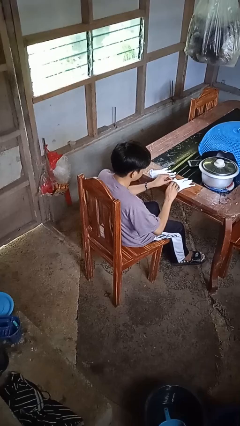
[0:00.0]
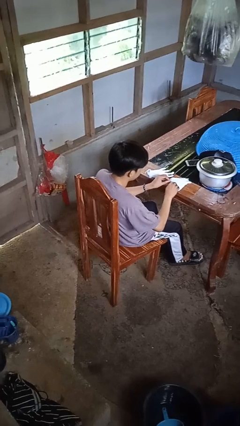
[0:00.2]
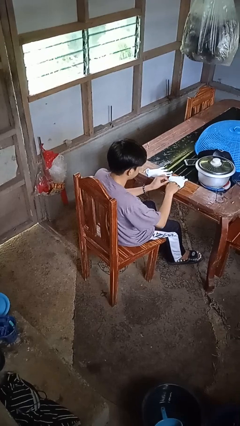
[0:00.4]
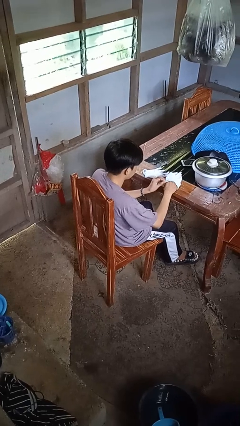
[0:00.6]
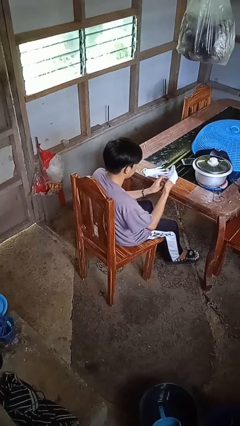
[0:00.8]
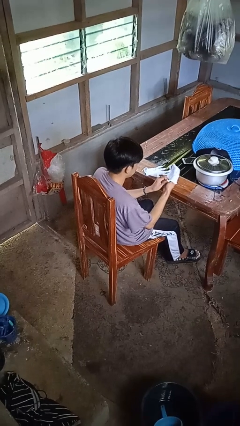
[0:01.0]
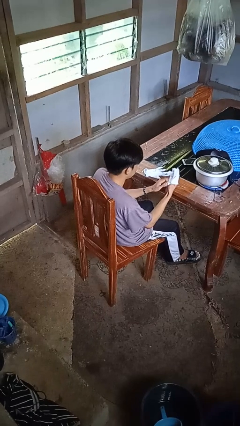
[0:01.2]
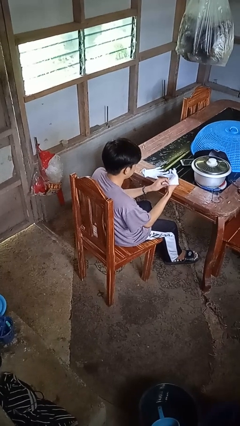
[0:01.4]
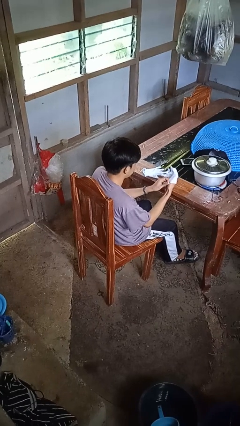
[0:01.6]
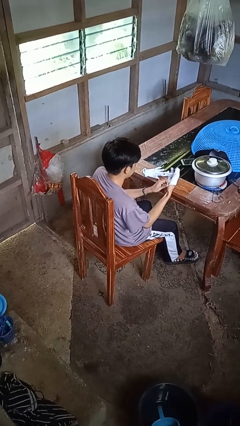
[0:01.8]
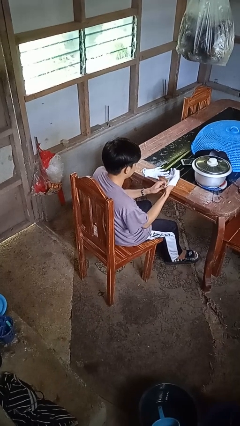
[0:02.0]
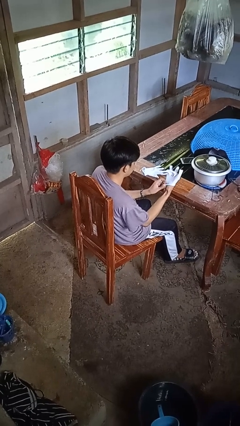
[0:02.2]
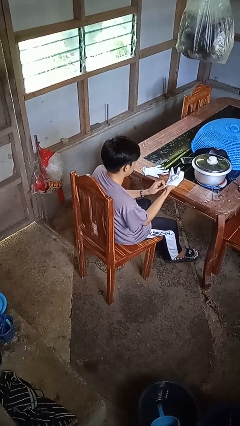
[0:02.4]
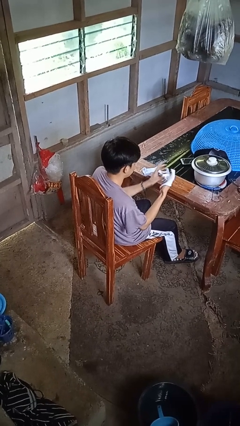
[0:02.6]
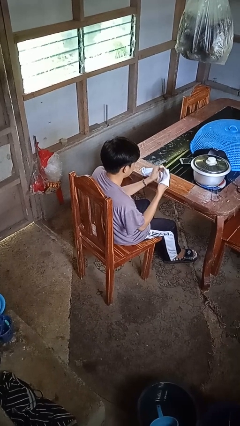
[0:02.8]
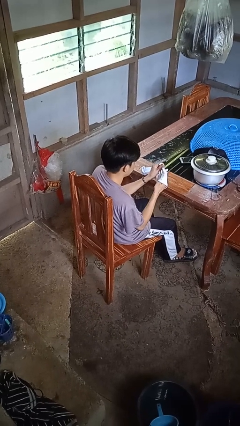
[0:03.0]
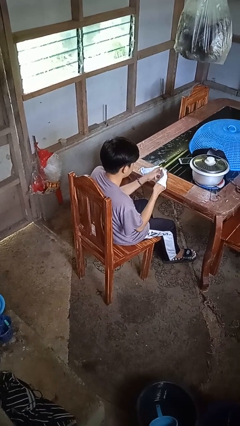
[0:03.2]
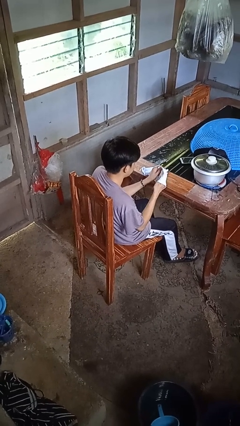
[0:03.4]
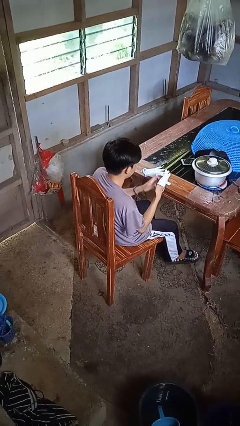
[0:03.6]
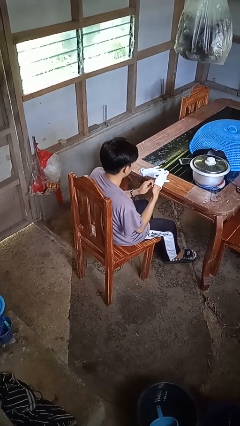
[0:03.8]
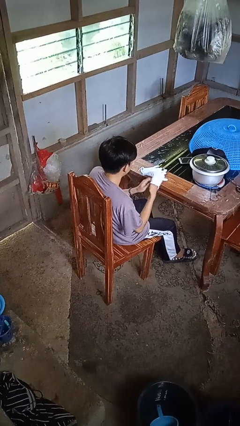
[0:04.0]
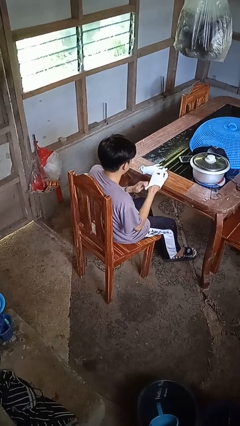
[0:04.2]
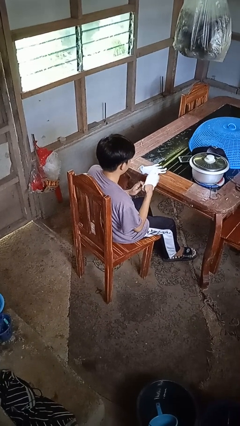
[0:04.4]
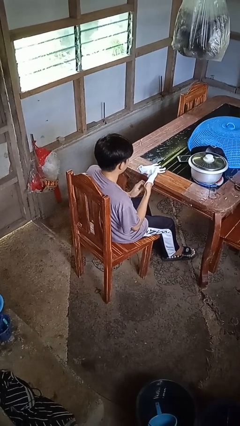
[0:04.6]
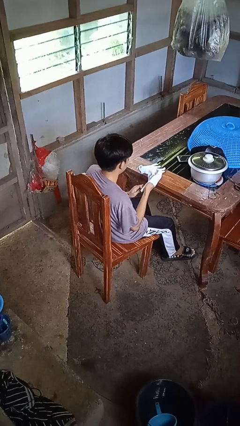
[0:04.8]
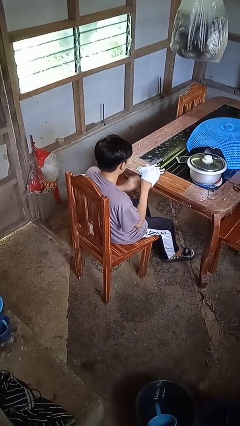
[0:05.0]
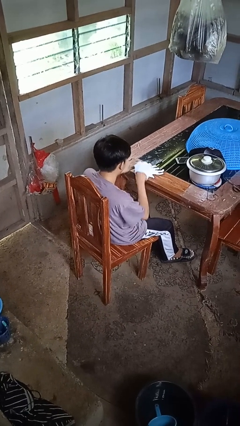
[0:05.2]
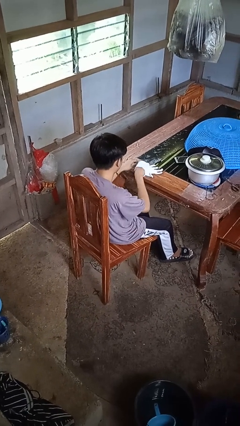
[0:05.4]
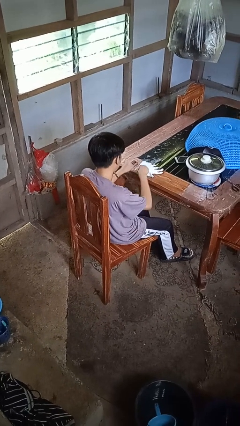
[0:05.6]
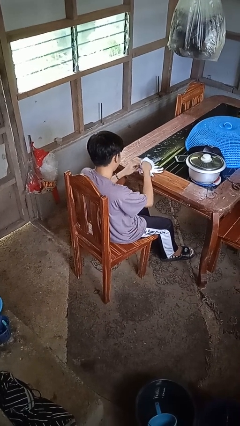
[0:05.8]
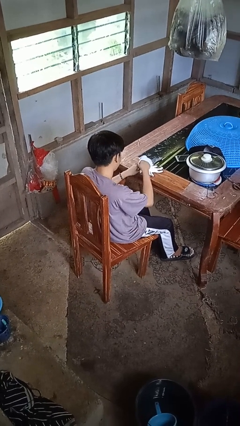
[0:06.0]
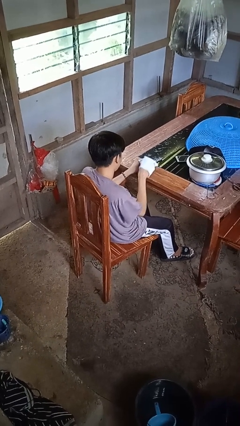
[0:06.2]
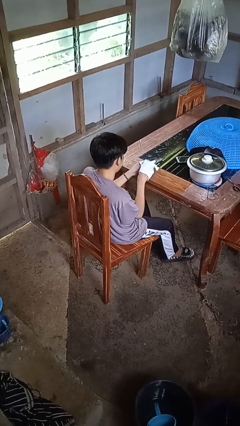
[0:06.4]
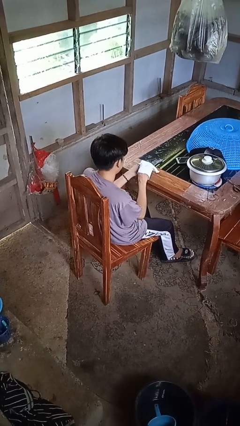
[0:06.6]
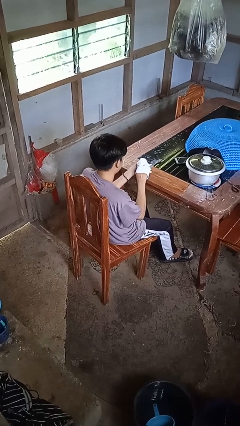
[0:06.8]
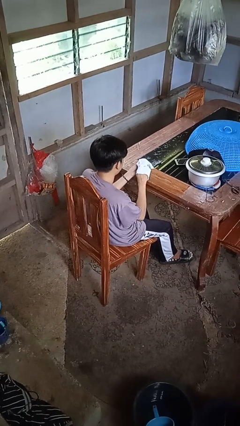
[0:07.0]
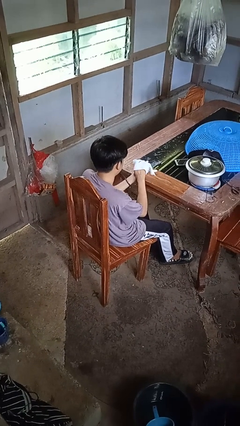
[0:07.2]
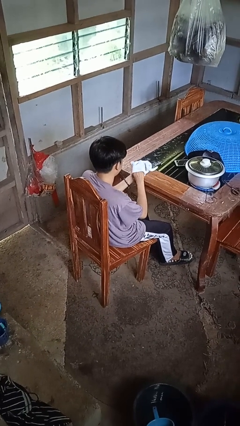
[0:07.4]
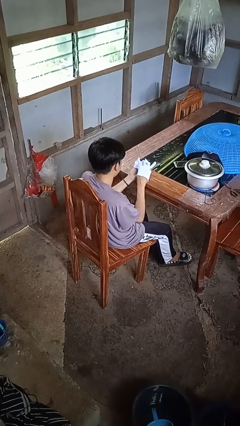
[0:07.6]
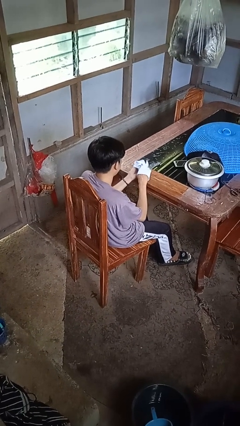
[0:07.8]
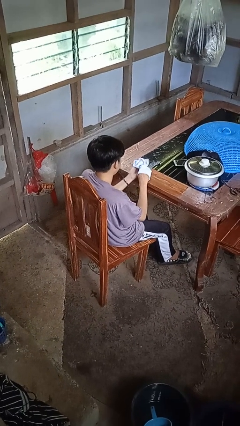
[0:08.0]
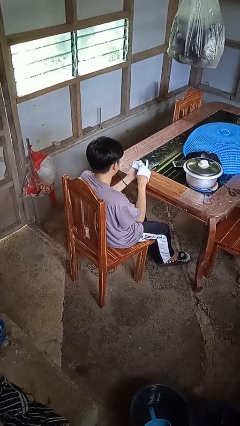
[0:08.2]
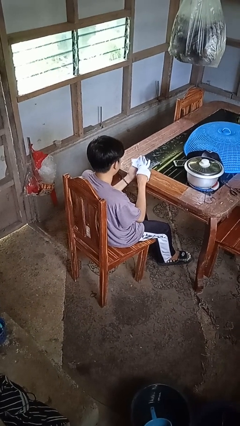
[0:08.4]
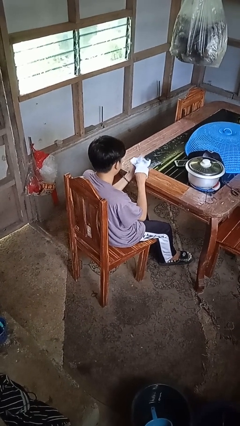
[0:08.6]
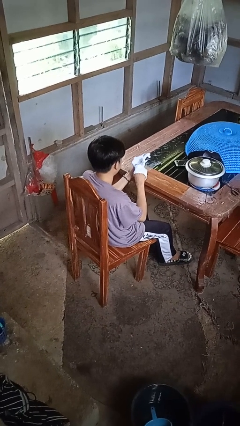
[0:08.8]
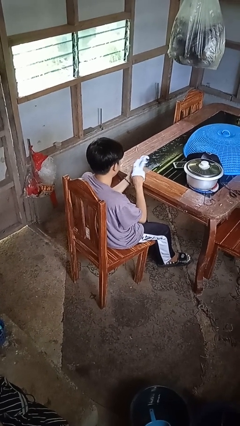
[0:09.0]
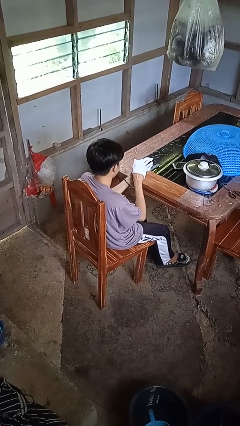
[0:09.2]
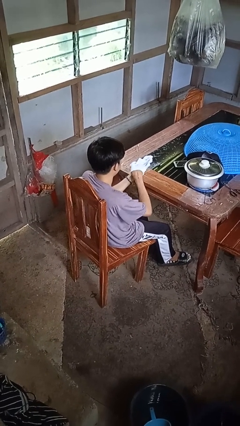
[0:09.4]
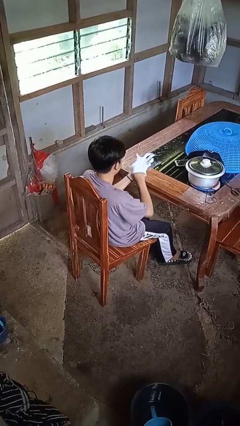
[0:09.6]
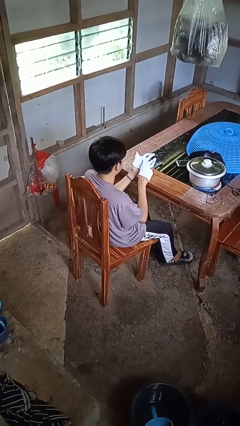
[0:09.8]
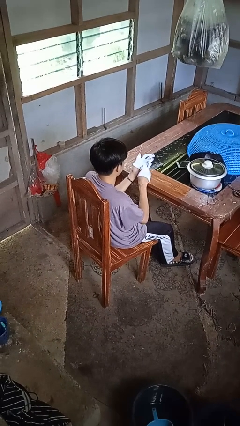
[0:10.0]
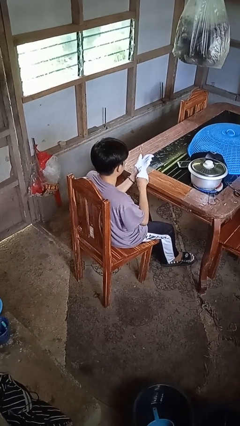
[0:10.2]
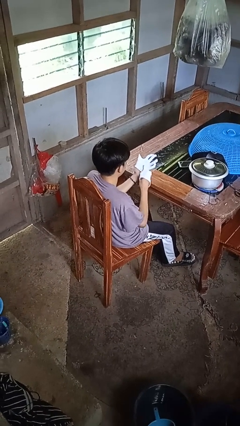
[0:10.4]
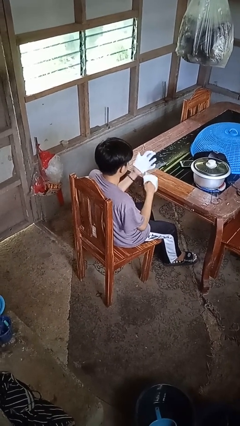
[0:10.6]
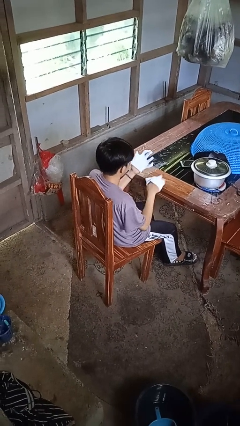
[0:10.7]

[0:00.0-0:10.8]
person puts on gloves

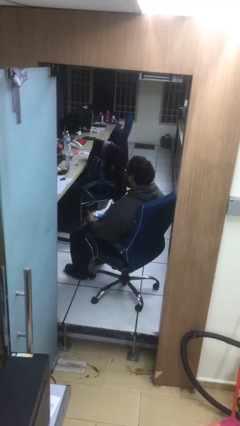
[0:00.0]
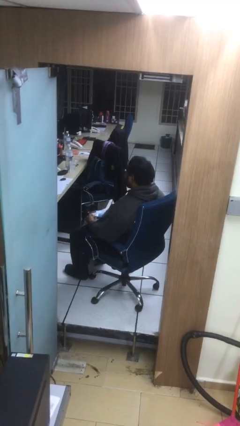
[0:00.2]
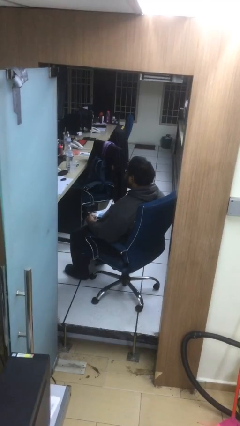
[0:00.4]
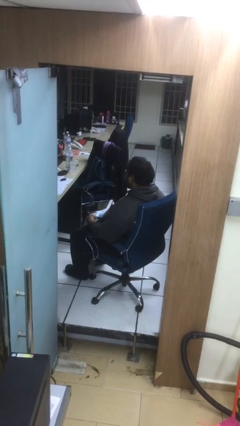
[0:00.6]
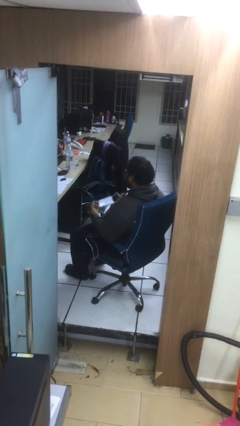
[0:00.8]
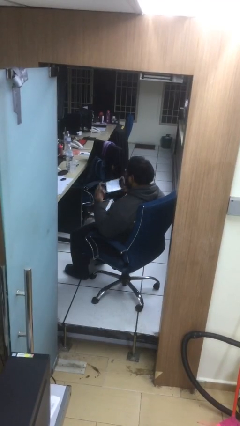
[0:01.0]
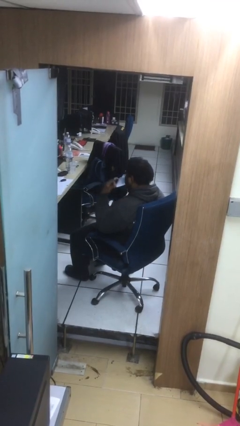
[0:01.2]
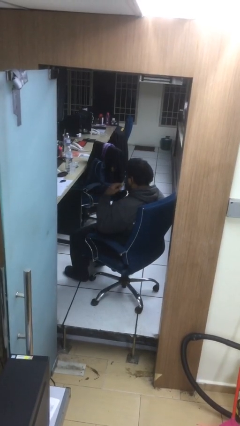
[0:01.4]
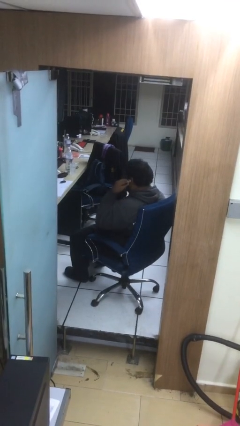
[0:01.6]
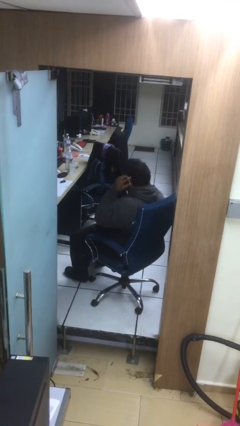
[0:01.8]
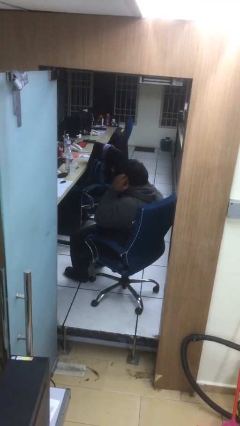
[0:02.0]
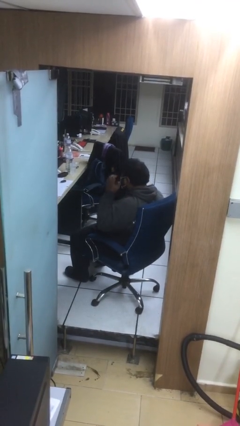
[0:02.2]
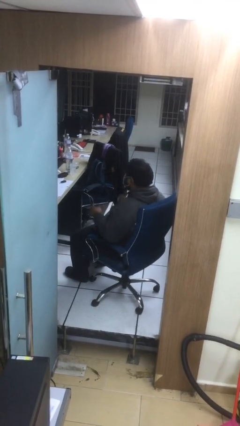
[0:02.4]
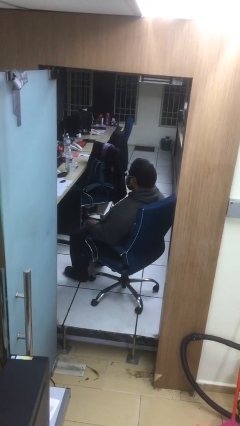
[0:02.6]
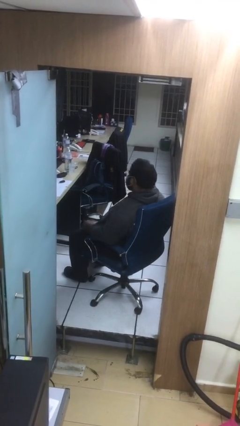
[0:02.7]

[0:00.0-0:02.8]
person puts on facemask

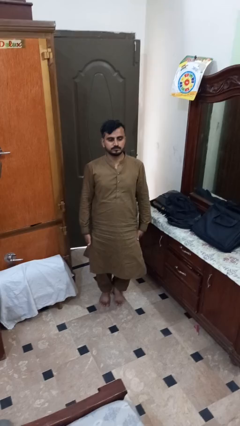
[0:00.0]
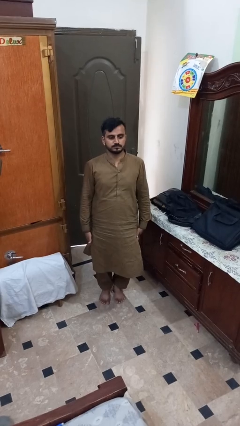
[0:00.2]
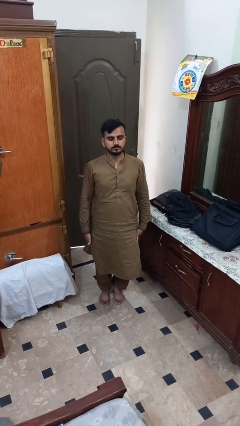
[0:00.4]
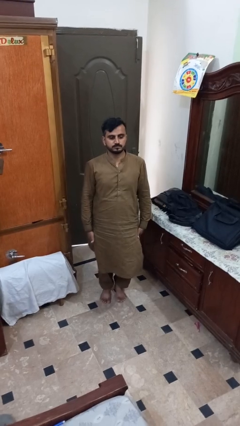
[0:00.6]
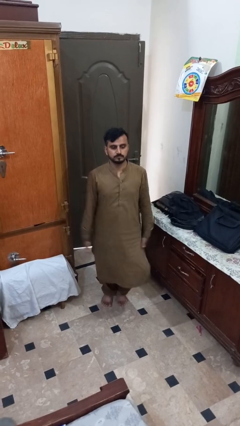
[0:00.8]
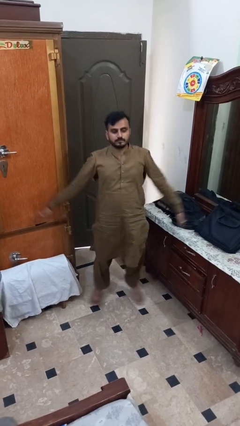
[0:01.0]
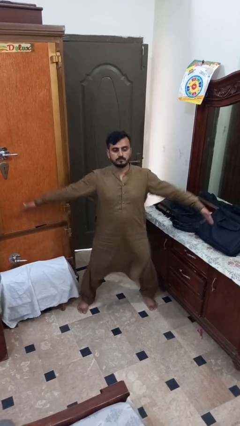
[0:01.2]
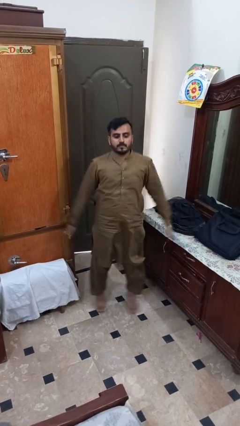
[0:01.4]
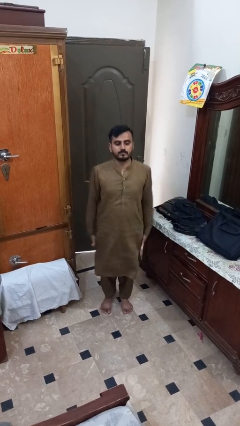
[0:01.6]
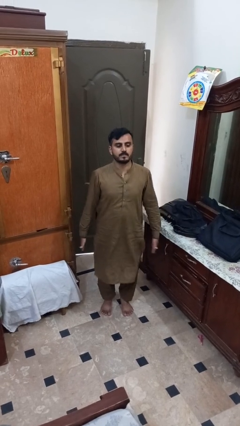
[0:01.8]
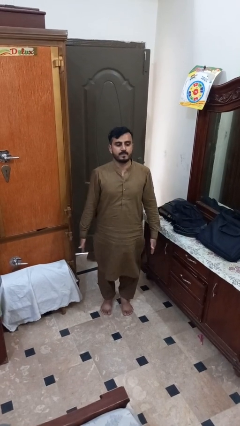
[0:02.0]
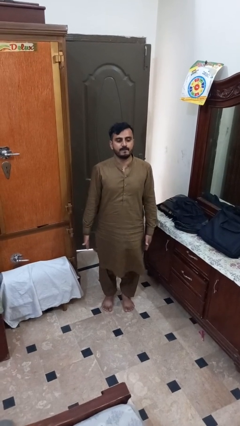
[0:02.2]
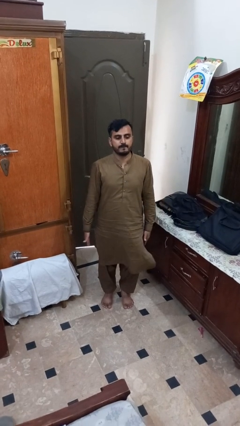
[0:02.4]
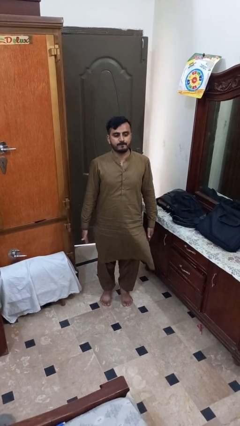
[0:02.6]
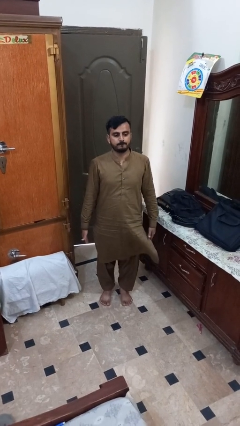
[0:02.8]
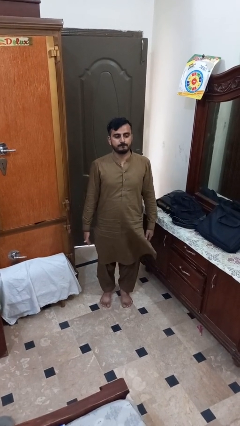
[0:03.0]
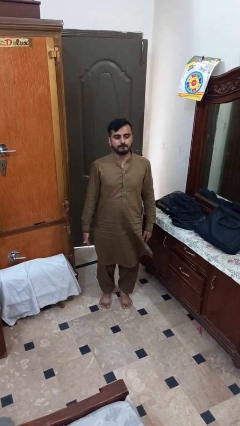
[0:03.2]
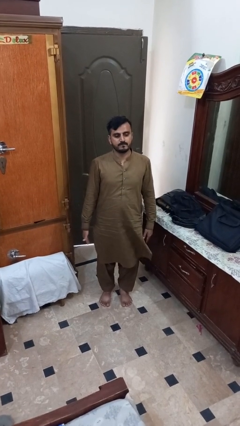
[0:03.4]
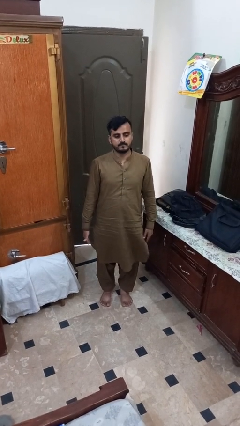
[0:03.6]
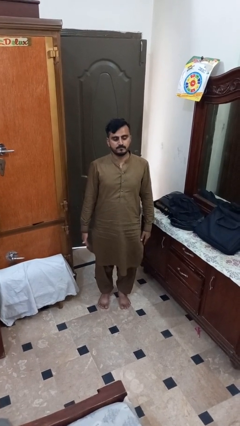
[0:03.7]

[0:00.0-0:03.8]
person exercises with jumping jacks
